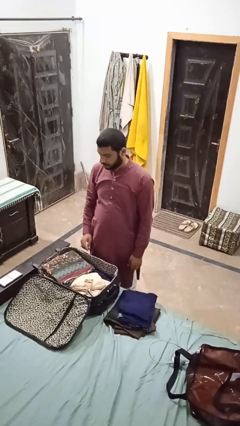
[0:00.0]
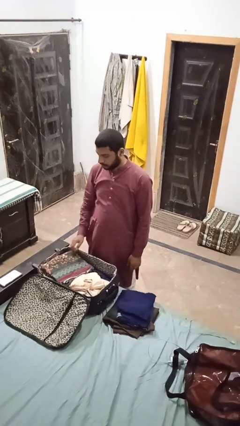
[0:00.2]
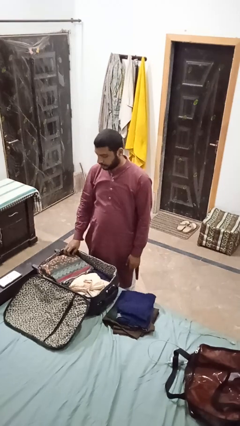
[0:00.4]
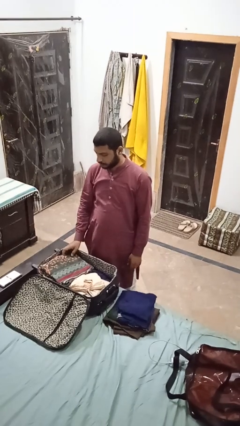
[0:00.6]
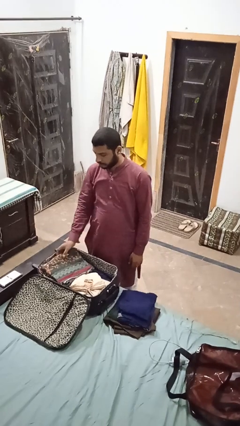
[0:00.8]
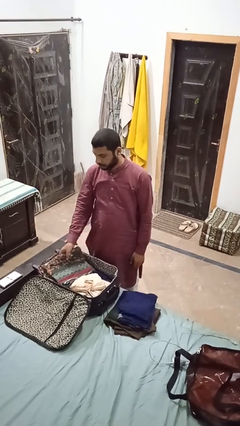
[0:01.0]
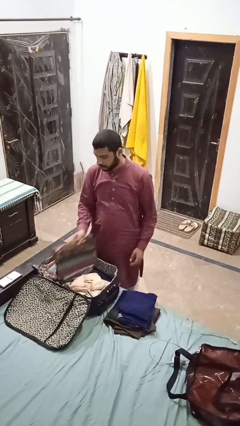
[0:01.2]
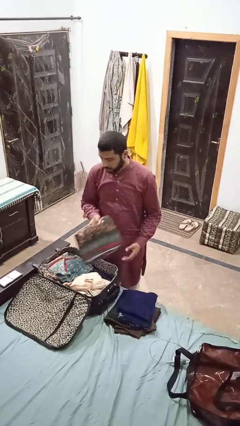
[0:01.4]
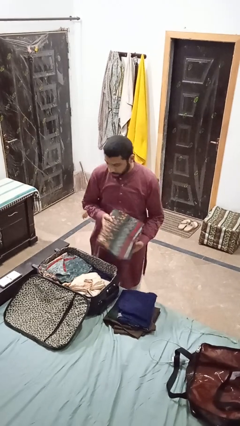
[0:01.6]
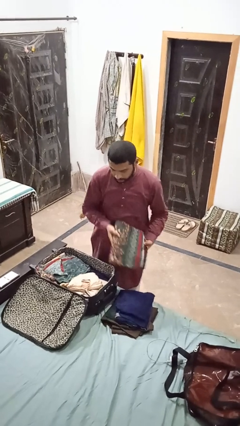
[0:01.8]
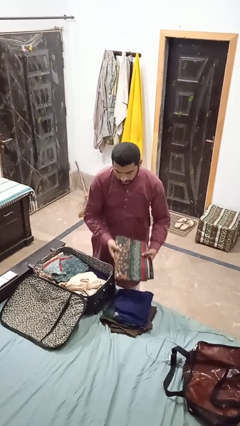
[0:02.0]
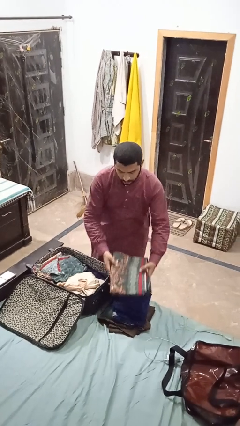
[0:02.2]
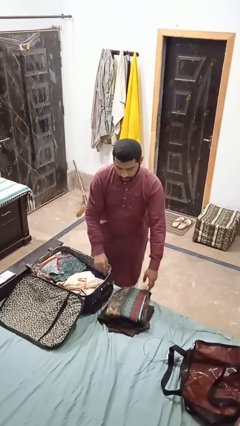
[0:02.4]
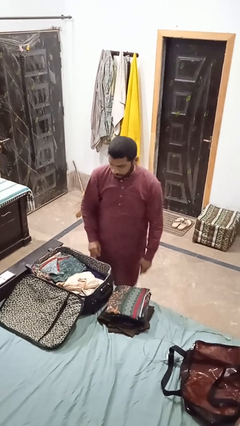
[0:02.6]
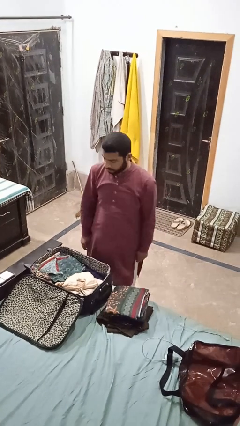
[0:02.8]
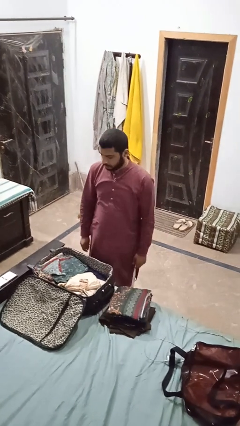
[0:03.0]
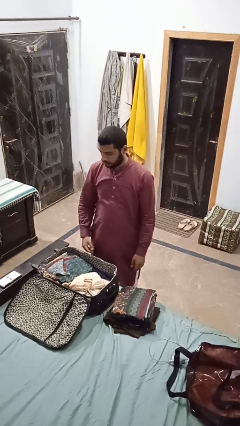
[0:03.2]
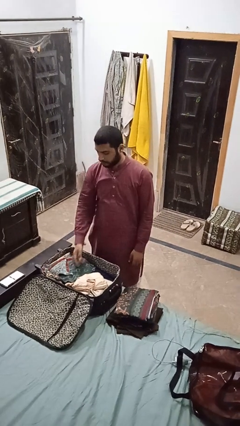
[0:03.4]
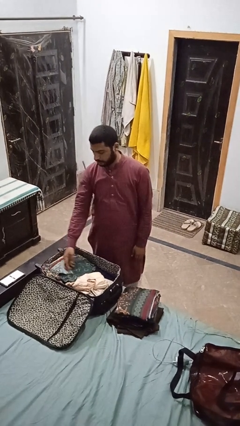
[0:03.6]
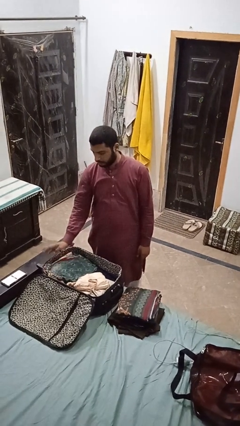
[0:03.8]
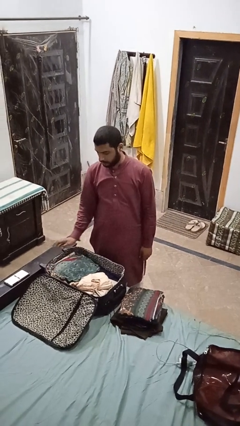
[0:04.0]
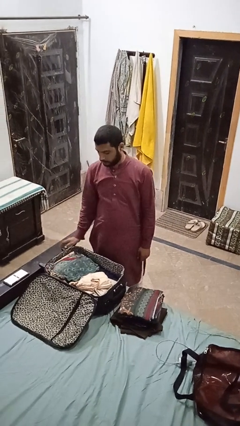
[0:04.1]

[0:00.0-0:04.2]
person unloads clothes from suitcase

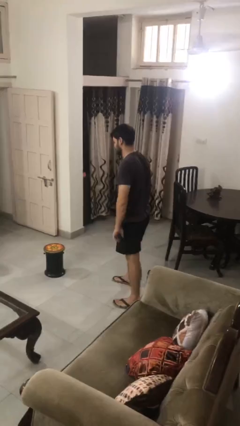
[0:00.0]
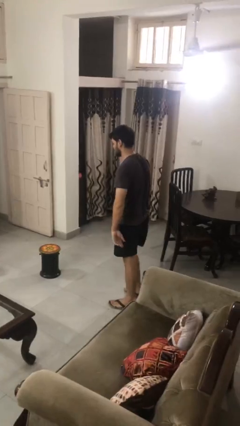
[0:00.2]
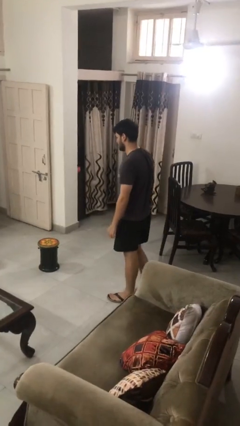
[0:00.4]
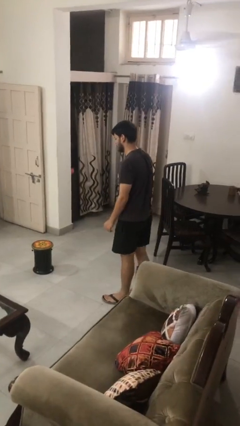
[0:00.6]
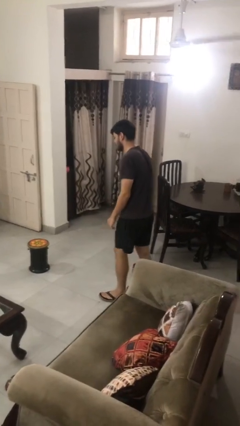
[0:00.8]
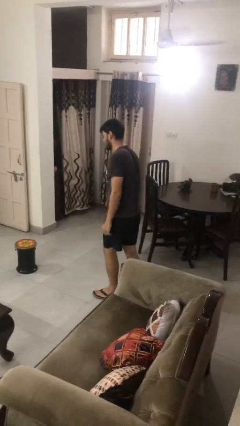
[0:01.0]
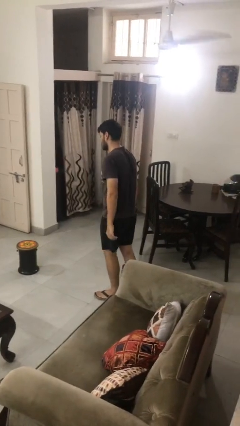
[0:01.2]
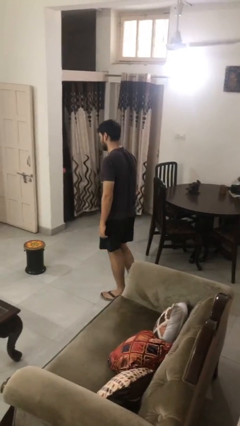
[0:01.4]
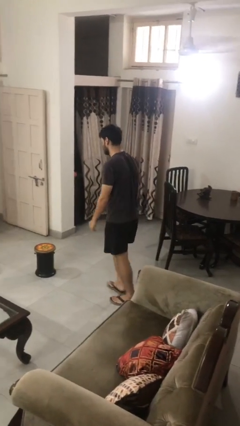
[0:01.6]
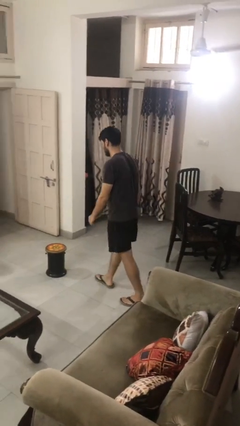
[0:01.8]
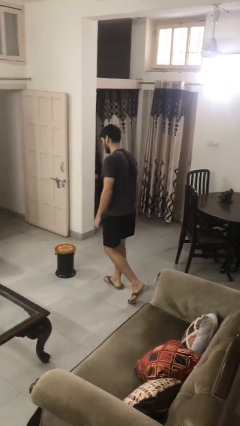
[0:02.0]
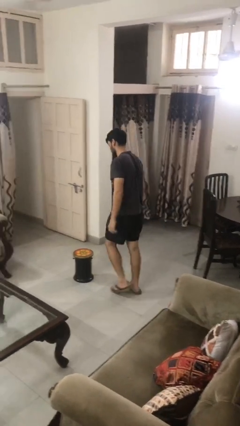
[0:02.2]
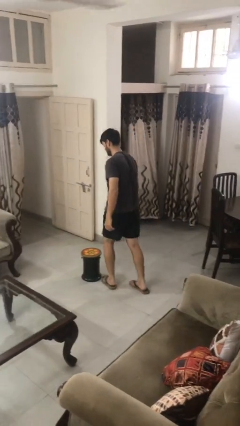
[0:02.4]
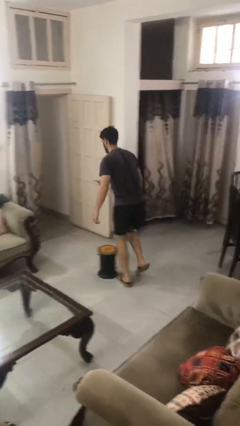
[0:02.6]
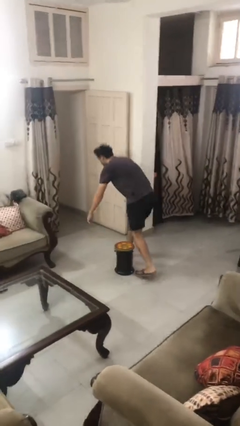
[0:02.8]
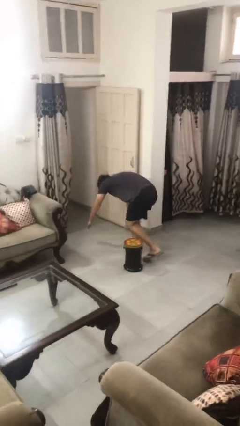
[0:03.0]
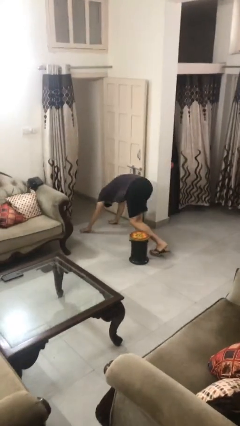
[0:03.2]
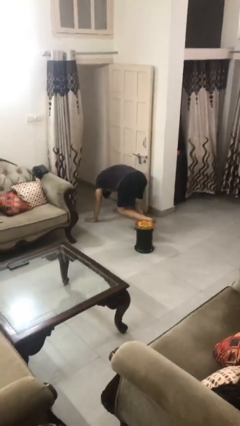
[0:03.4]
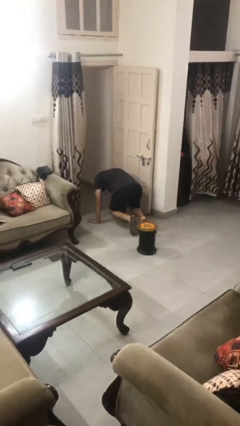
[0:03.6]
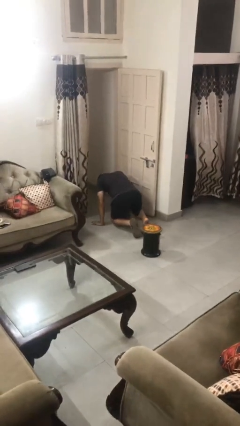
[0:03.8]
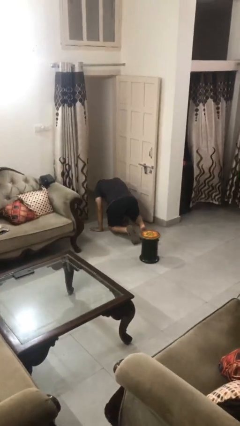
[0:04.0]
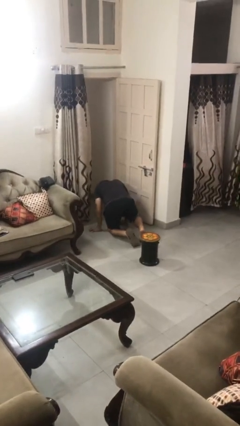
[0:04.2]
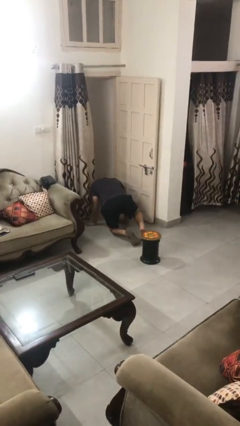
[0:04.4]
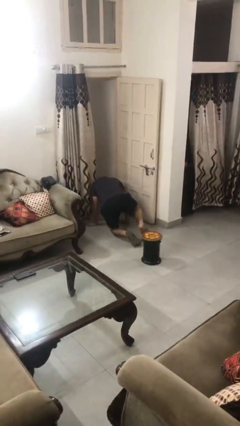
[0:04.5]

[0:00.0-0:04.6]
person trips on object on floor

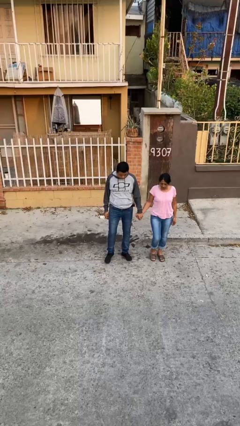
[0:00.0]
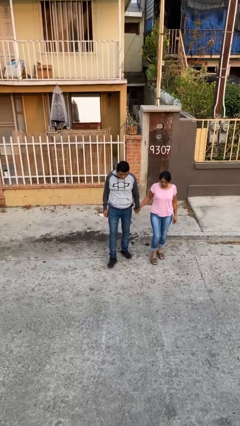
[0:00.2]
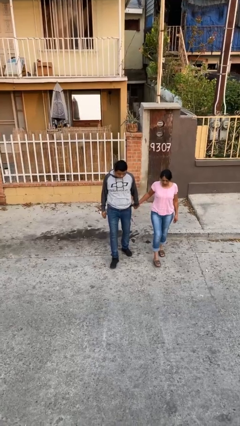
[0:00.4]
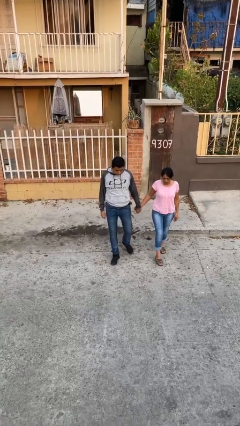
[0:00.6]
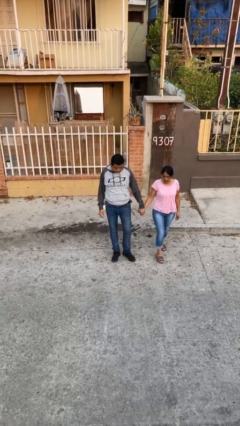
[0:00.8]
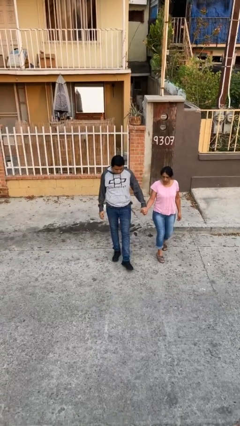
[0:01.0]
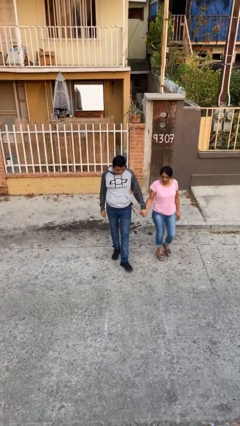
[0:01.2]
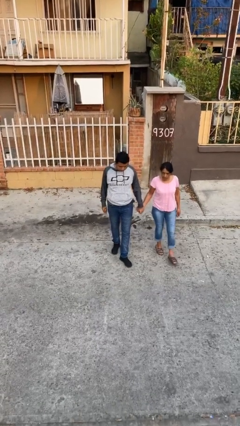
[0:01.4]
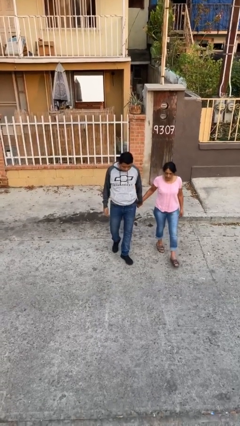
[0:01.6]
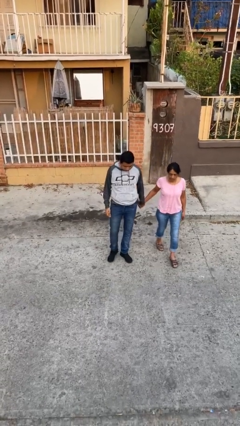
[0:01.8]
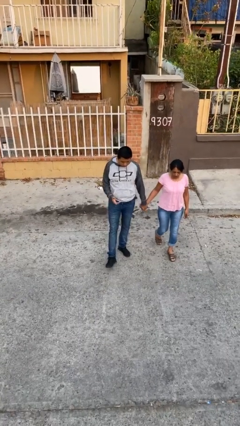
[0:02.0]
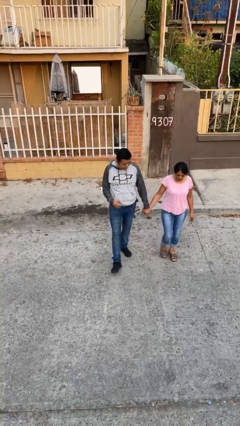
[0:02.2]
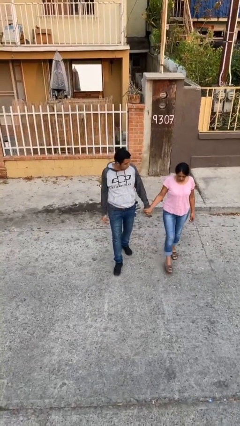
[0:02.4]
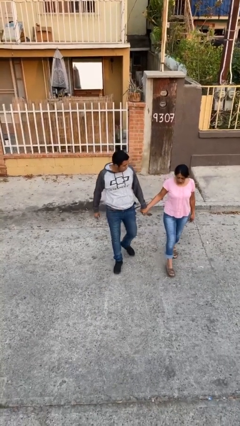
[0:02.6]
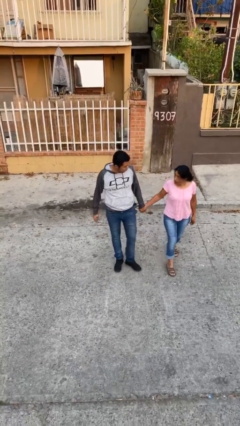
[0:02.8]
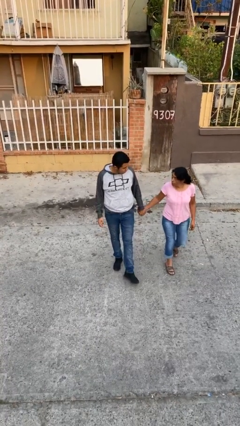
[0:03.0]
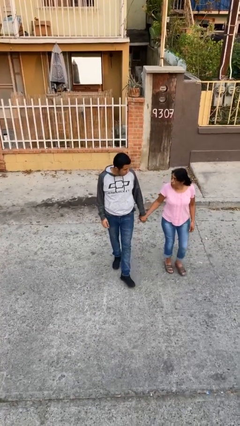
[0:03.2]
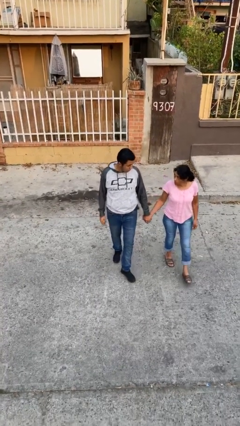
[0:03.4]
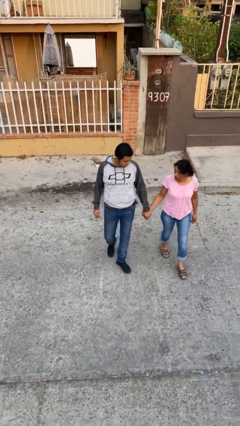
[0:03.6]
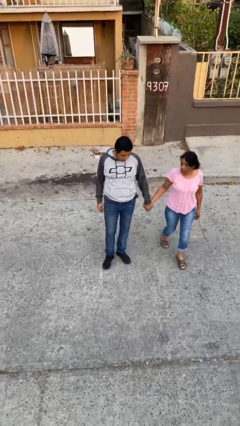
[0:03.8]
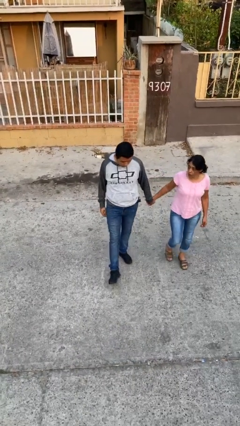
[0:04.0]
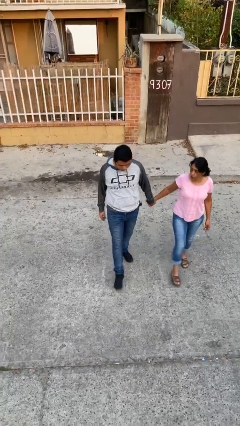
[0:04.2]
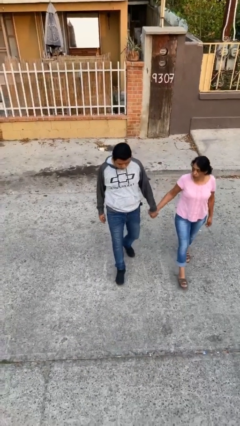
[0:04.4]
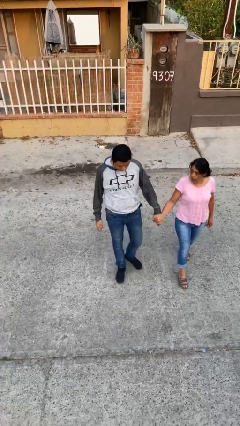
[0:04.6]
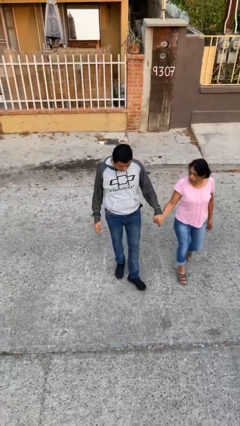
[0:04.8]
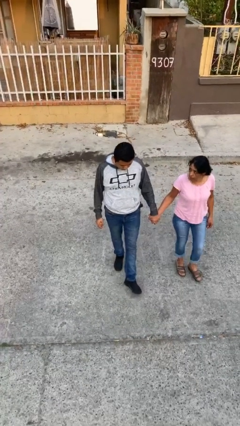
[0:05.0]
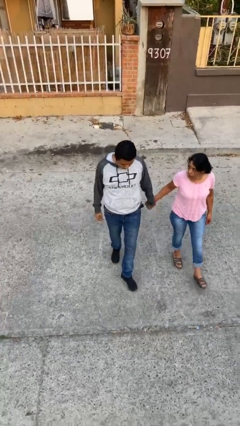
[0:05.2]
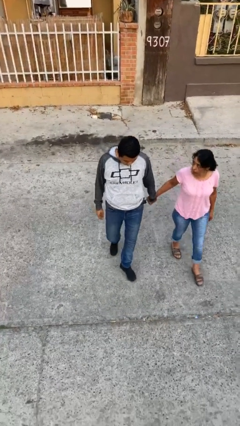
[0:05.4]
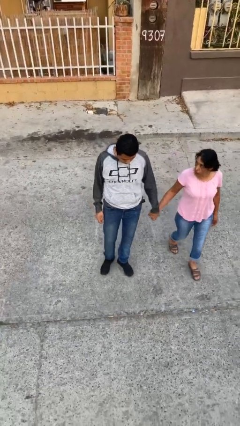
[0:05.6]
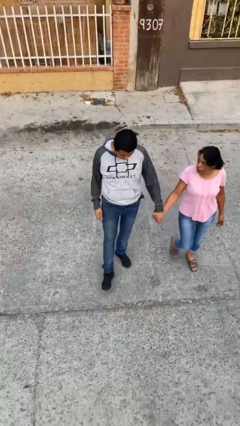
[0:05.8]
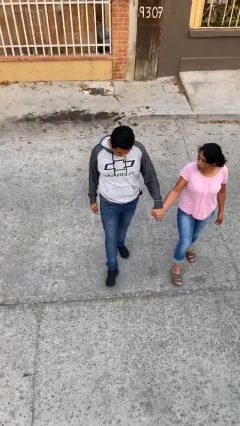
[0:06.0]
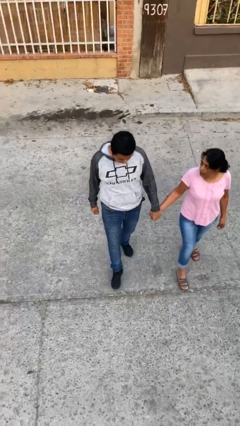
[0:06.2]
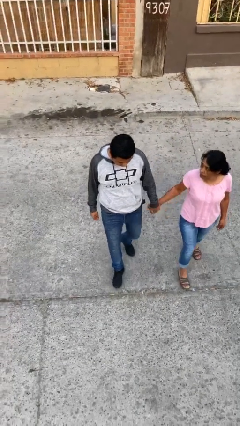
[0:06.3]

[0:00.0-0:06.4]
person holds hand

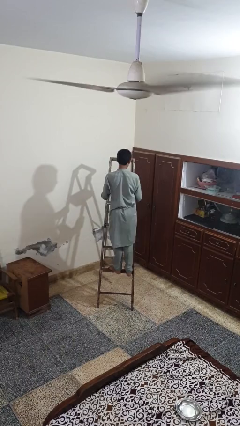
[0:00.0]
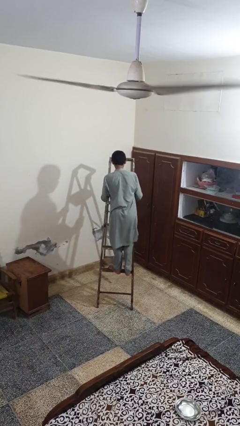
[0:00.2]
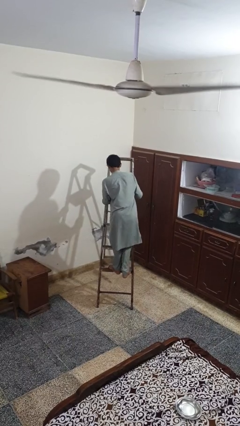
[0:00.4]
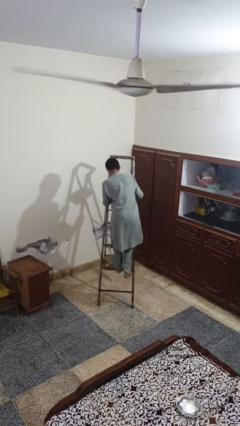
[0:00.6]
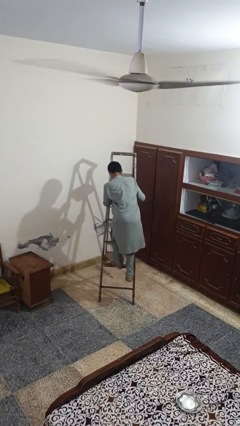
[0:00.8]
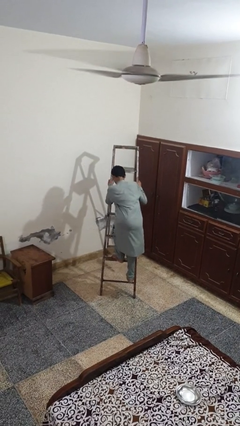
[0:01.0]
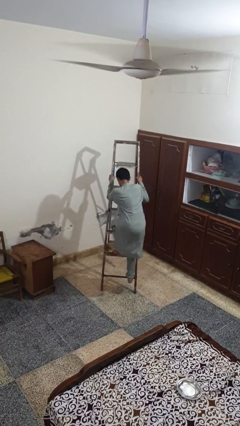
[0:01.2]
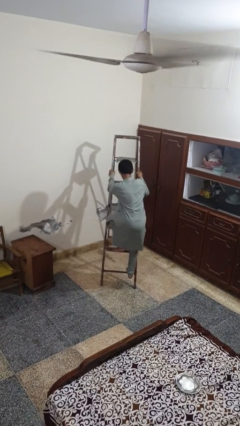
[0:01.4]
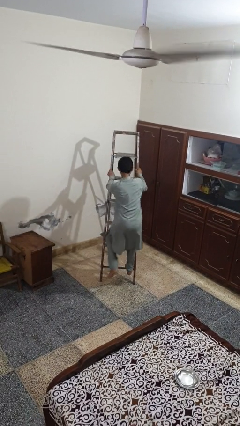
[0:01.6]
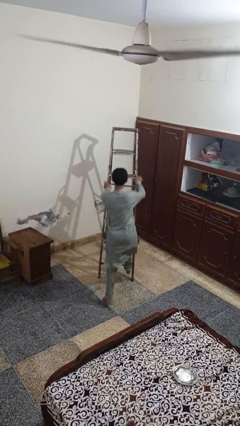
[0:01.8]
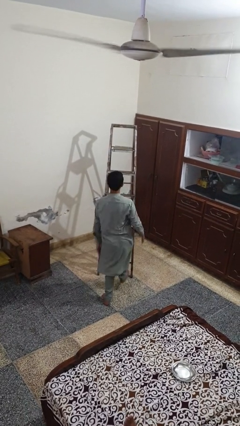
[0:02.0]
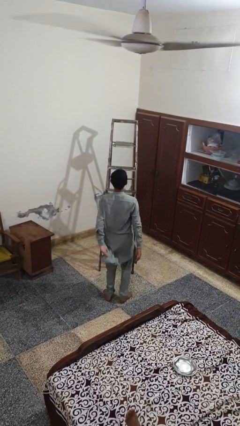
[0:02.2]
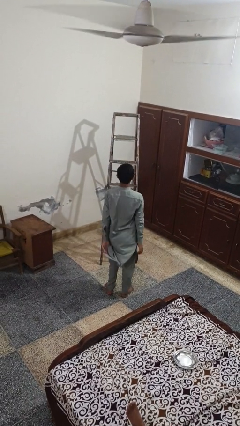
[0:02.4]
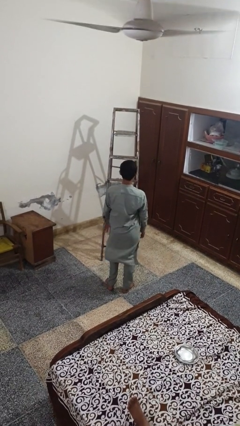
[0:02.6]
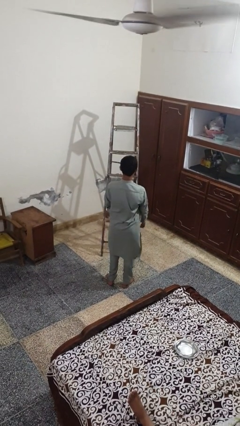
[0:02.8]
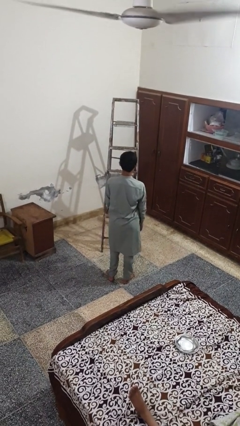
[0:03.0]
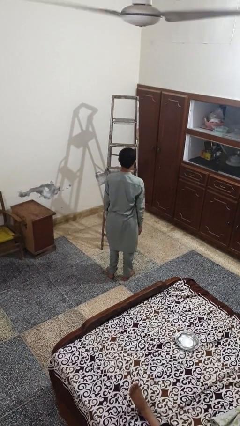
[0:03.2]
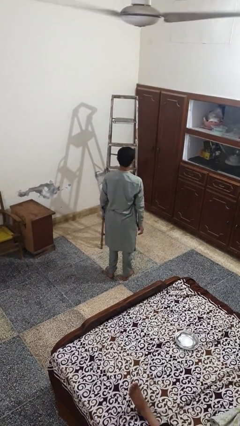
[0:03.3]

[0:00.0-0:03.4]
person climbs down ladder
